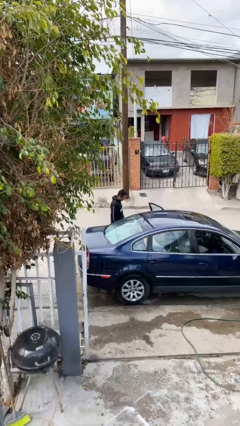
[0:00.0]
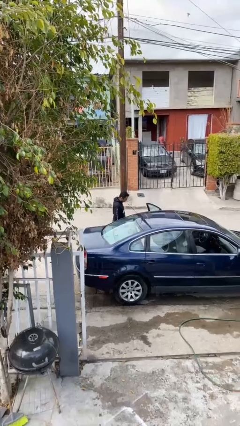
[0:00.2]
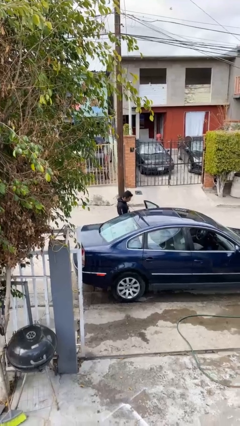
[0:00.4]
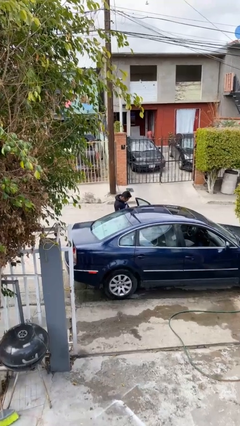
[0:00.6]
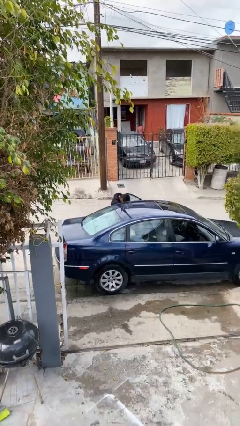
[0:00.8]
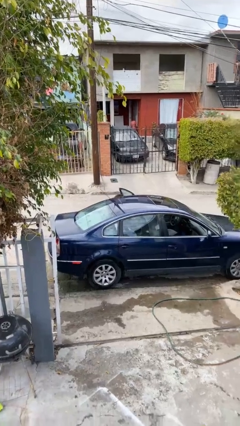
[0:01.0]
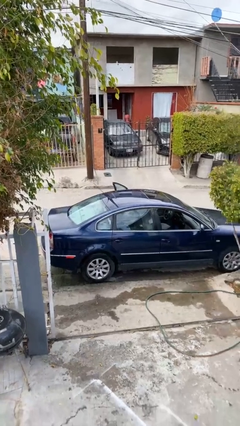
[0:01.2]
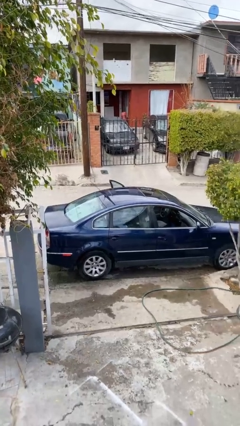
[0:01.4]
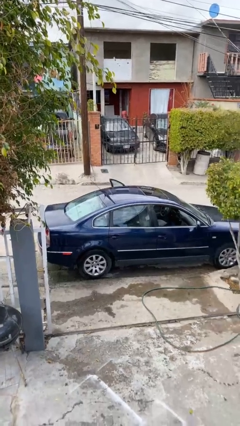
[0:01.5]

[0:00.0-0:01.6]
person enters car

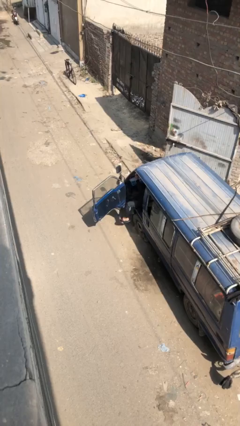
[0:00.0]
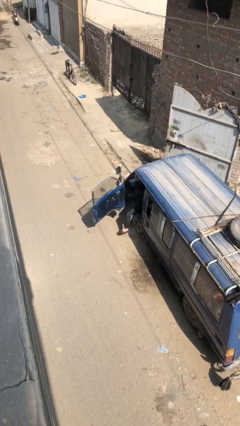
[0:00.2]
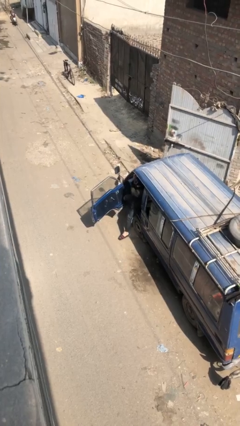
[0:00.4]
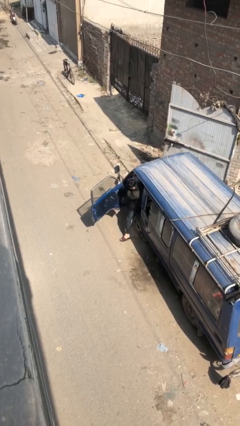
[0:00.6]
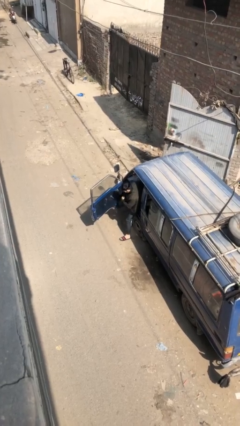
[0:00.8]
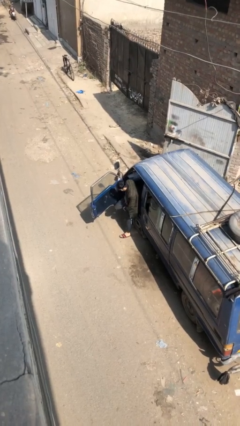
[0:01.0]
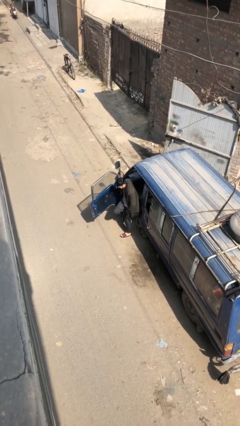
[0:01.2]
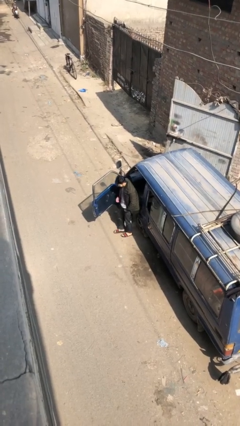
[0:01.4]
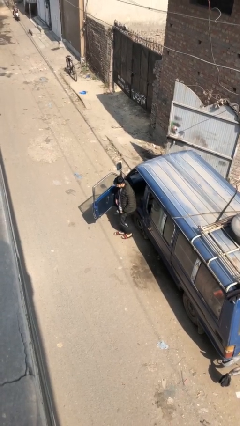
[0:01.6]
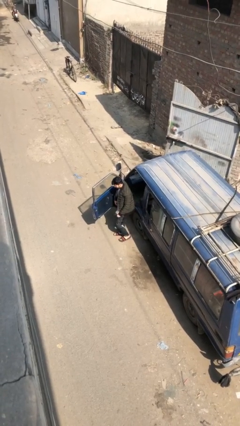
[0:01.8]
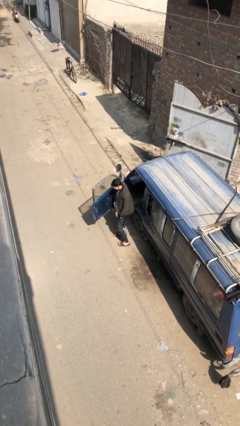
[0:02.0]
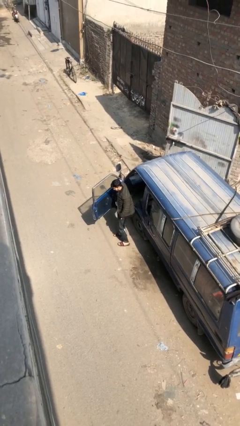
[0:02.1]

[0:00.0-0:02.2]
person exits car

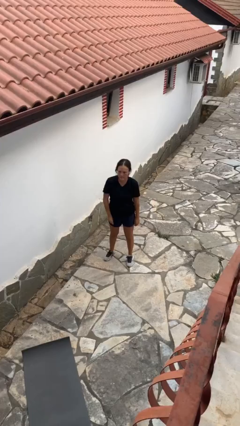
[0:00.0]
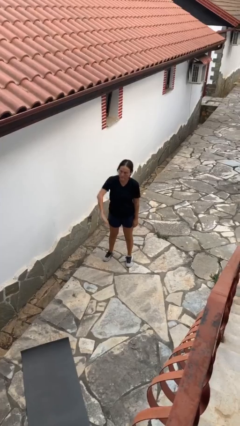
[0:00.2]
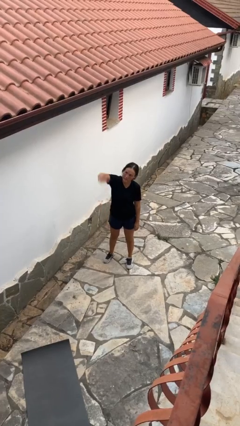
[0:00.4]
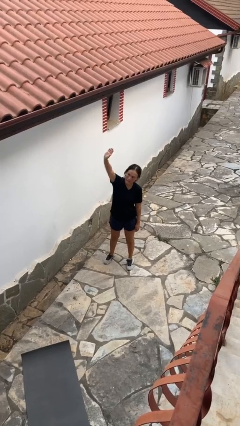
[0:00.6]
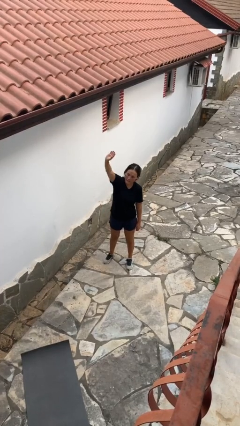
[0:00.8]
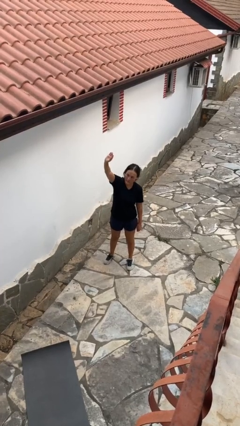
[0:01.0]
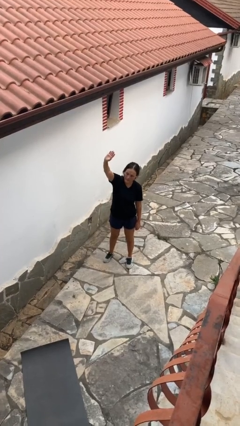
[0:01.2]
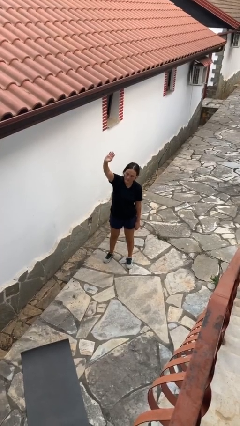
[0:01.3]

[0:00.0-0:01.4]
person gestures swipe up

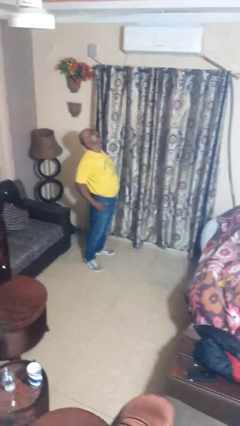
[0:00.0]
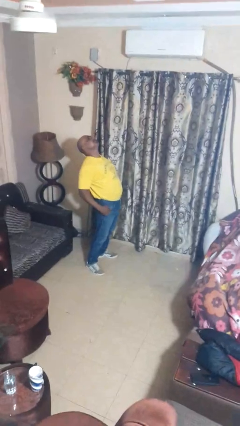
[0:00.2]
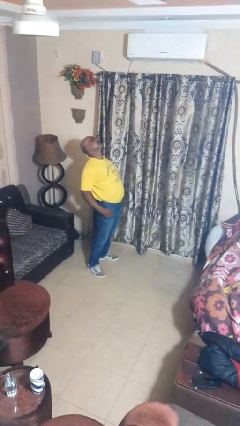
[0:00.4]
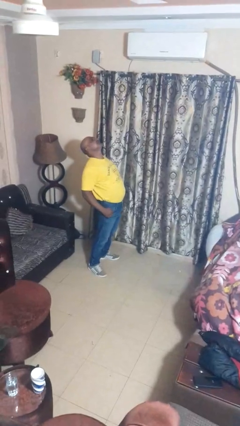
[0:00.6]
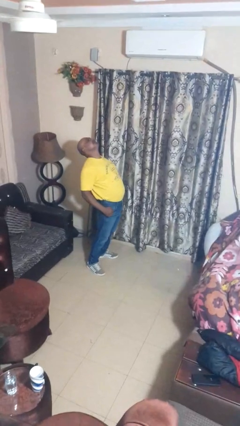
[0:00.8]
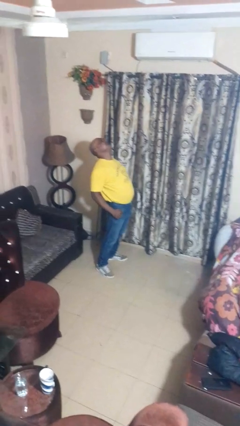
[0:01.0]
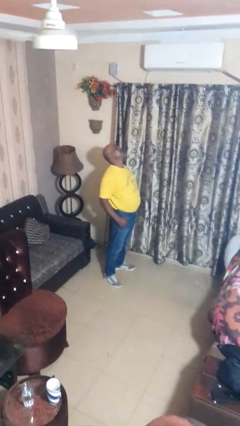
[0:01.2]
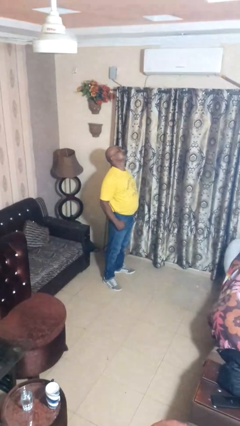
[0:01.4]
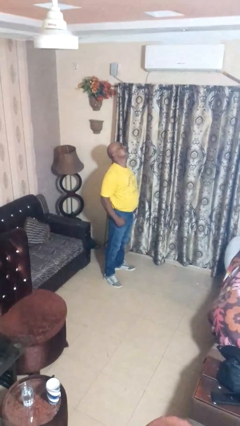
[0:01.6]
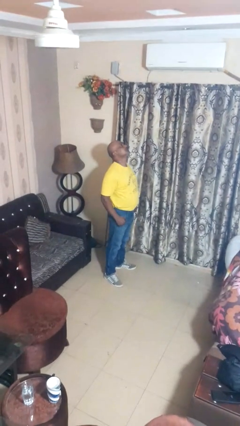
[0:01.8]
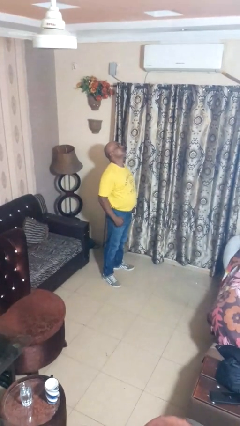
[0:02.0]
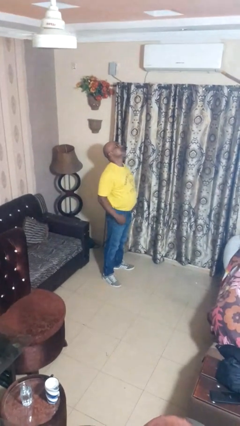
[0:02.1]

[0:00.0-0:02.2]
person stretches back

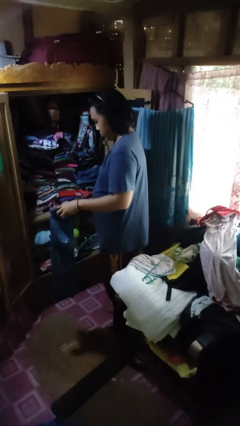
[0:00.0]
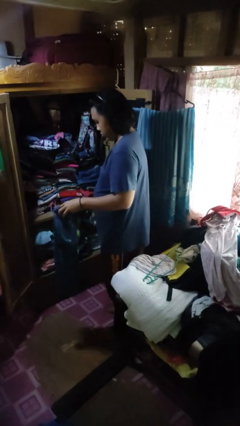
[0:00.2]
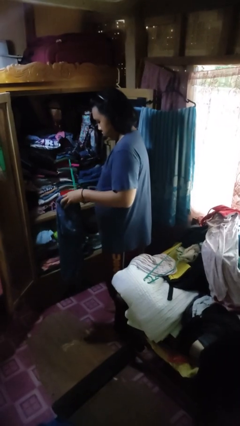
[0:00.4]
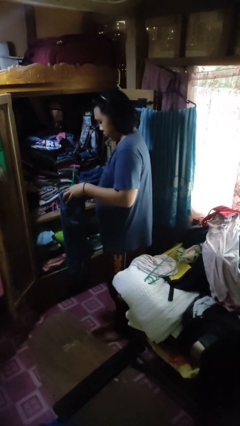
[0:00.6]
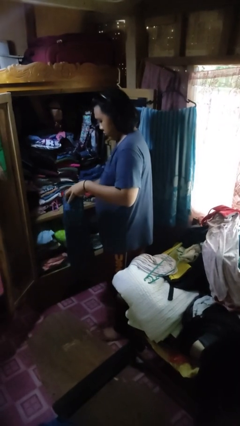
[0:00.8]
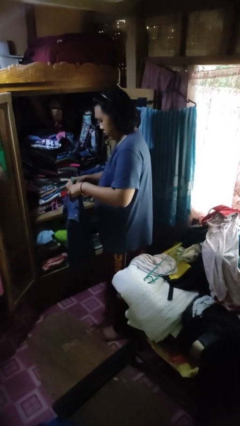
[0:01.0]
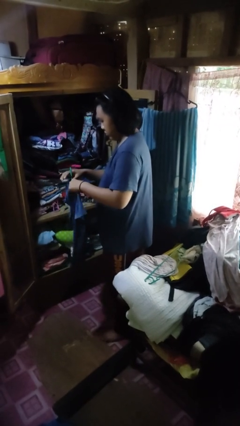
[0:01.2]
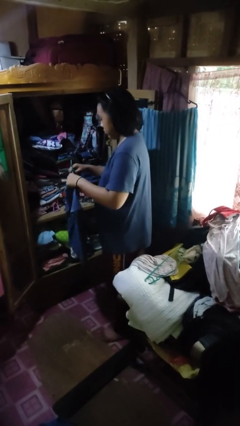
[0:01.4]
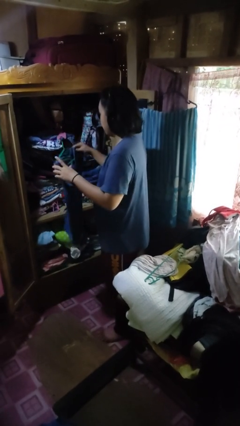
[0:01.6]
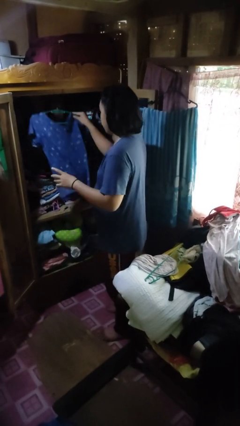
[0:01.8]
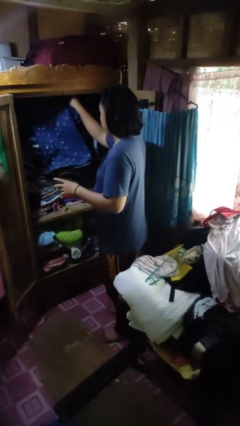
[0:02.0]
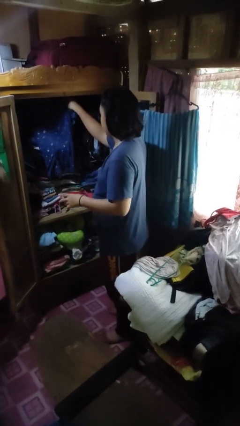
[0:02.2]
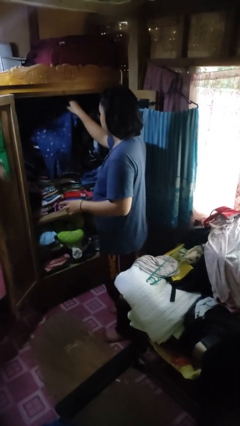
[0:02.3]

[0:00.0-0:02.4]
person puts clothes into closet

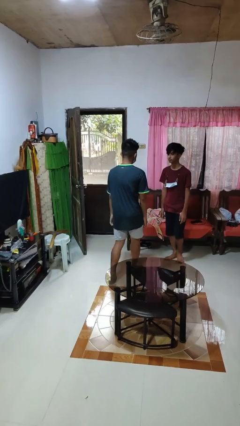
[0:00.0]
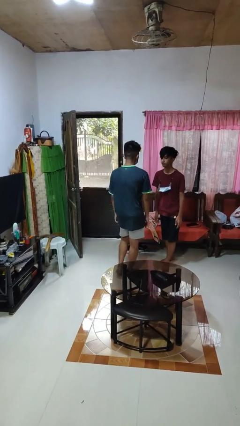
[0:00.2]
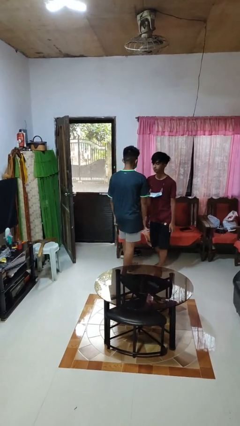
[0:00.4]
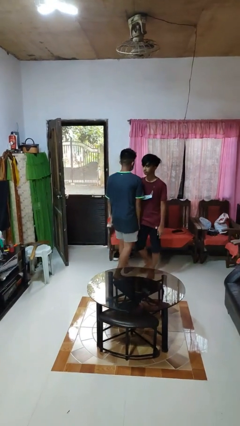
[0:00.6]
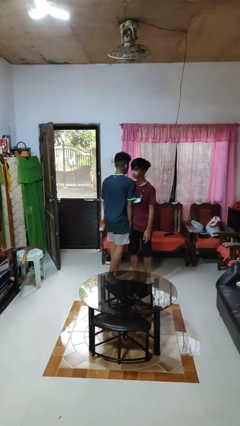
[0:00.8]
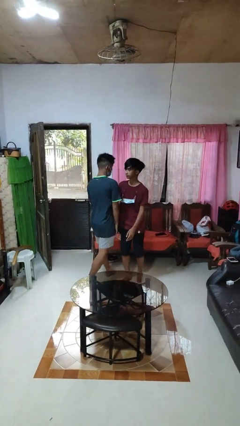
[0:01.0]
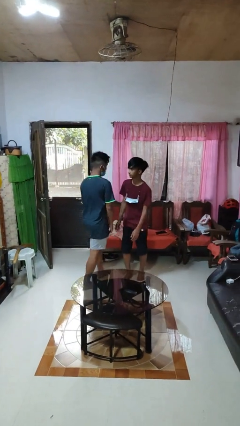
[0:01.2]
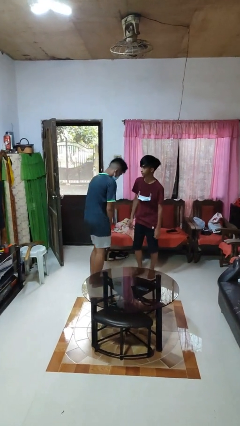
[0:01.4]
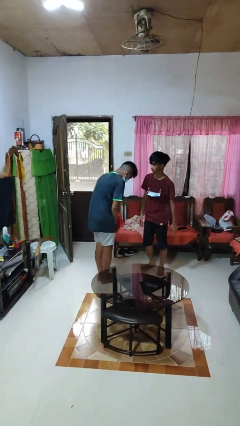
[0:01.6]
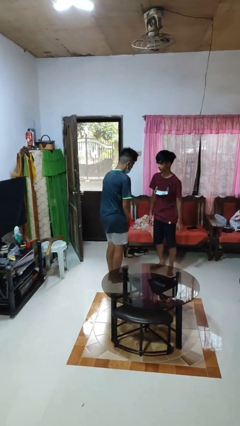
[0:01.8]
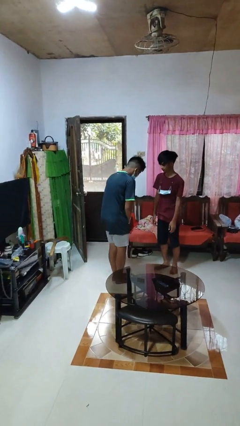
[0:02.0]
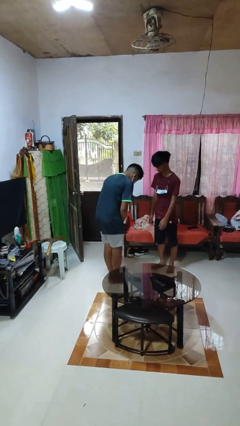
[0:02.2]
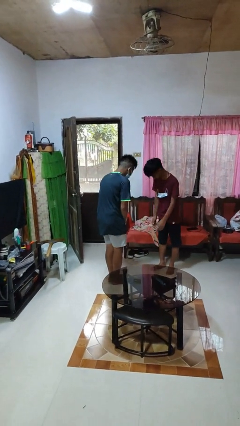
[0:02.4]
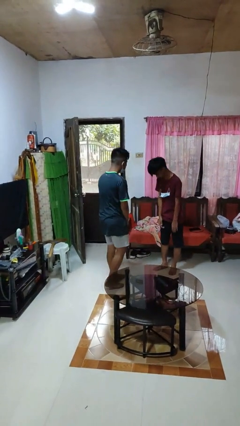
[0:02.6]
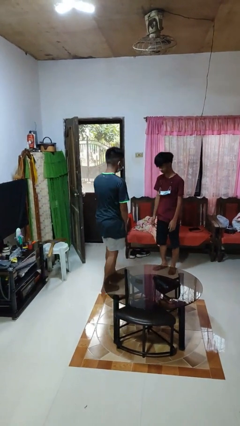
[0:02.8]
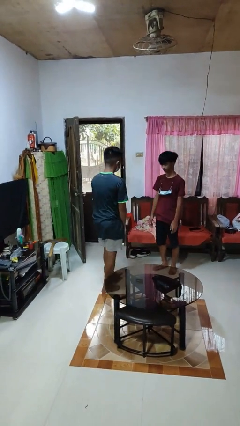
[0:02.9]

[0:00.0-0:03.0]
person bumps into person

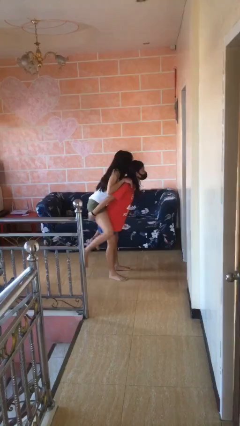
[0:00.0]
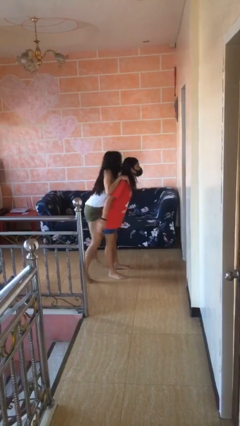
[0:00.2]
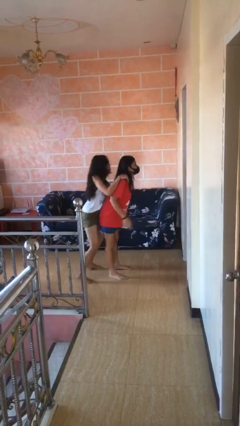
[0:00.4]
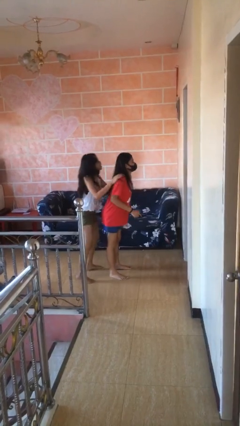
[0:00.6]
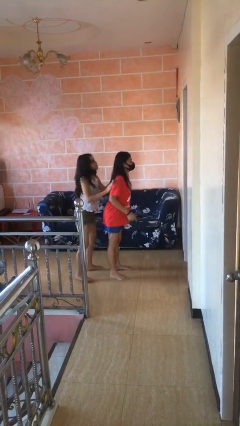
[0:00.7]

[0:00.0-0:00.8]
person puts down person

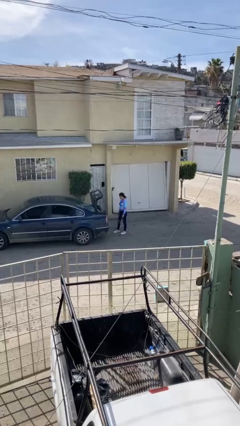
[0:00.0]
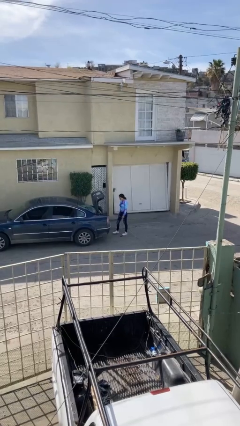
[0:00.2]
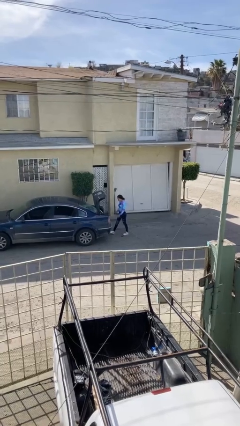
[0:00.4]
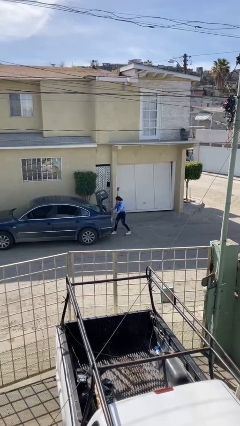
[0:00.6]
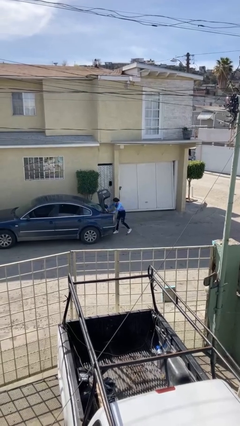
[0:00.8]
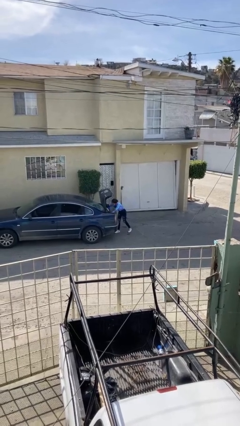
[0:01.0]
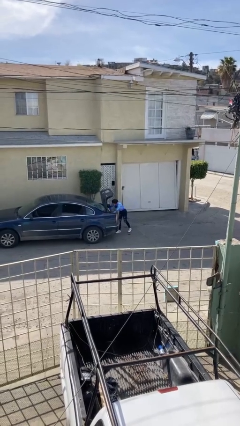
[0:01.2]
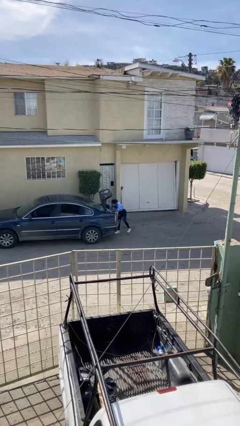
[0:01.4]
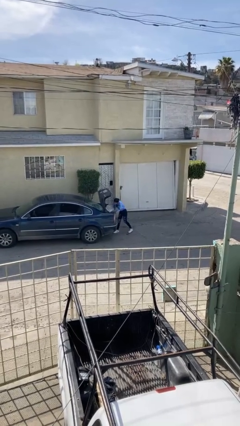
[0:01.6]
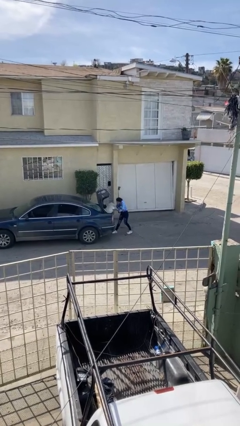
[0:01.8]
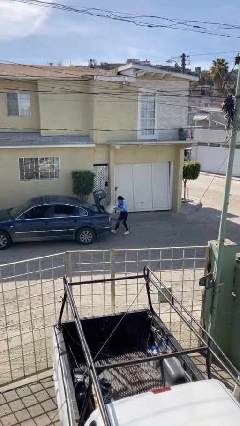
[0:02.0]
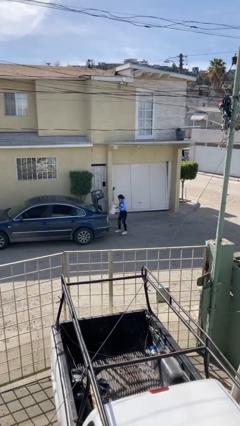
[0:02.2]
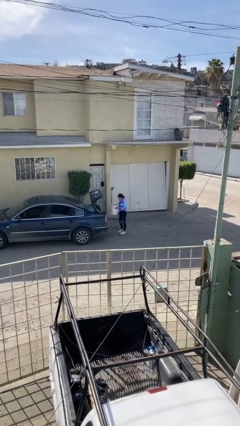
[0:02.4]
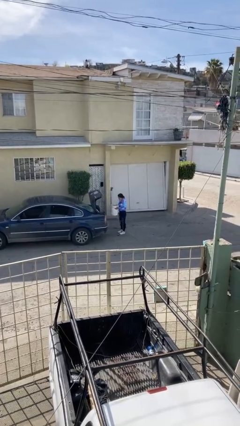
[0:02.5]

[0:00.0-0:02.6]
person unloads car

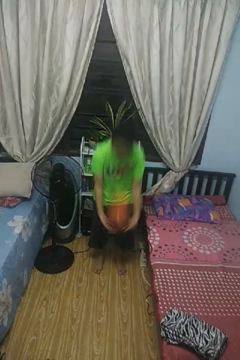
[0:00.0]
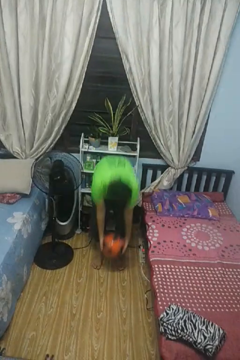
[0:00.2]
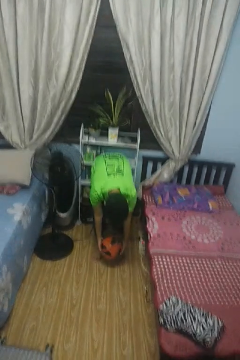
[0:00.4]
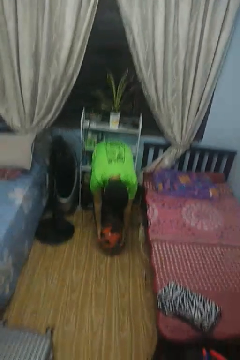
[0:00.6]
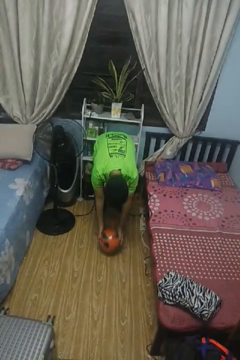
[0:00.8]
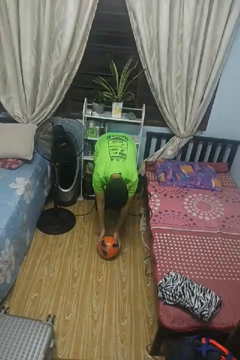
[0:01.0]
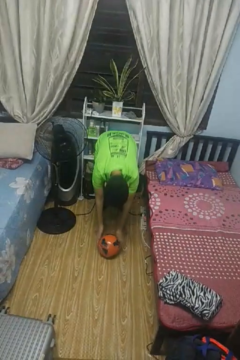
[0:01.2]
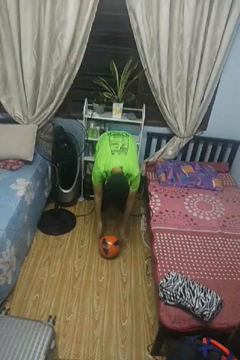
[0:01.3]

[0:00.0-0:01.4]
person catches dropped object
